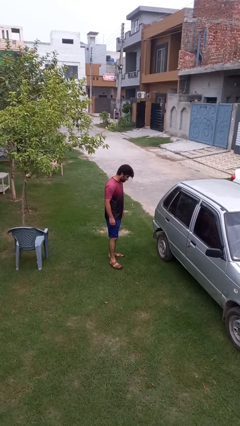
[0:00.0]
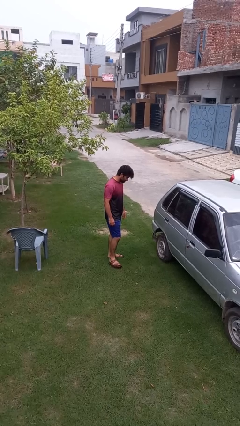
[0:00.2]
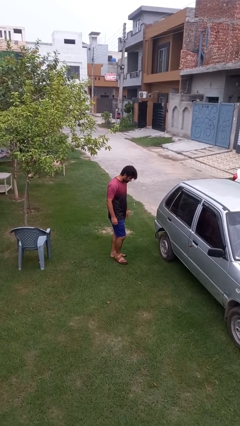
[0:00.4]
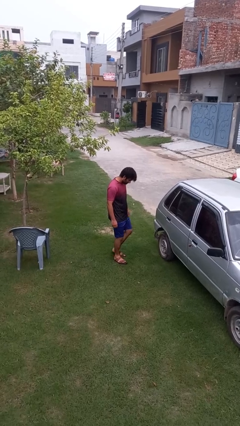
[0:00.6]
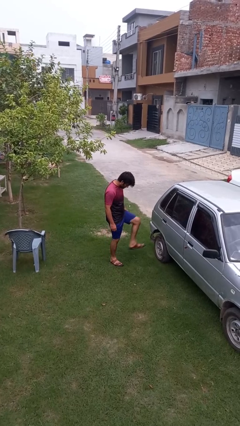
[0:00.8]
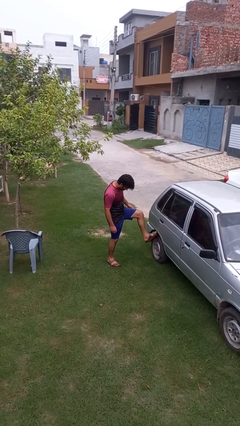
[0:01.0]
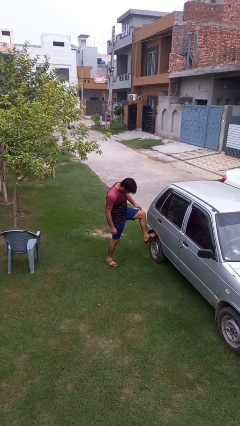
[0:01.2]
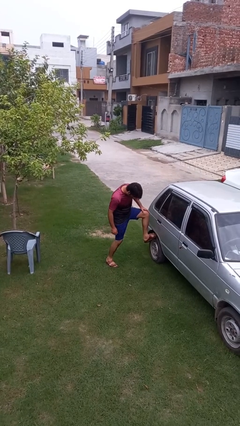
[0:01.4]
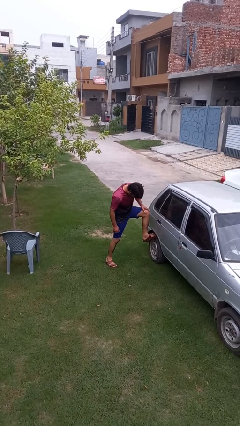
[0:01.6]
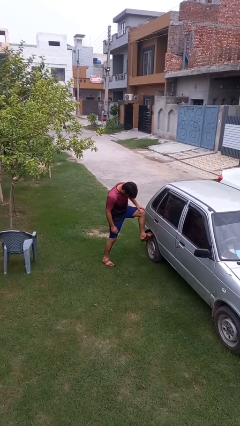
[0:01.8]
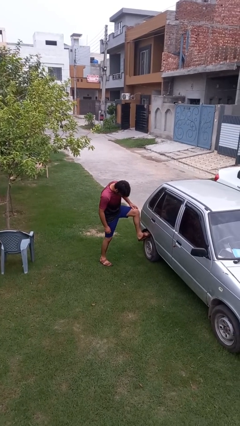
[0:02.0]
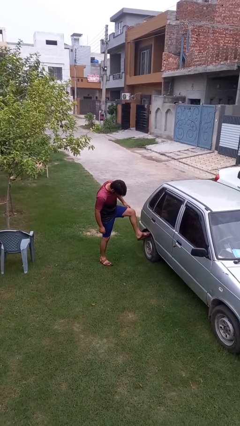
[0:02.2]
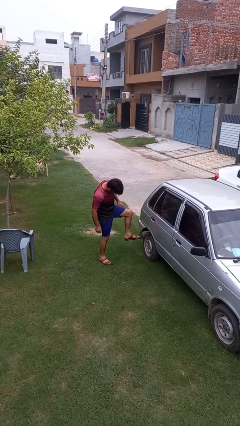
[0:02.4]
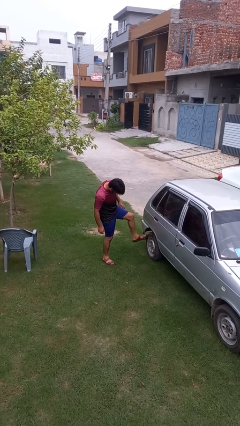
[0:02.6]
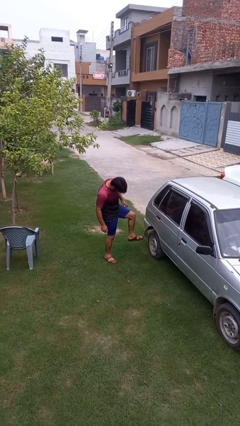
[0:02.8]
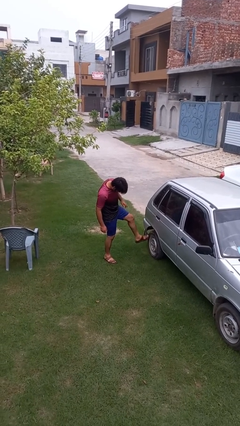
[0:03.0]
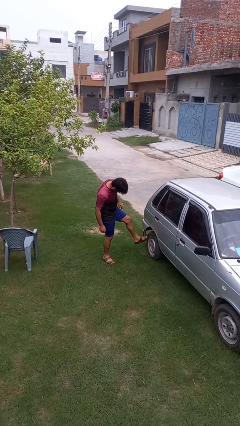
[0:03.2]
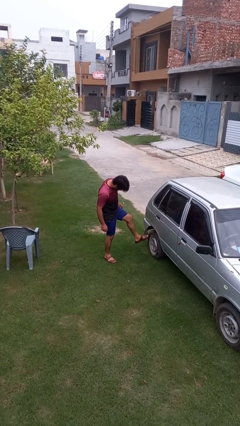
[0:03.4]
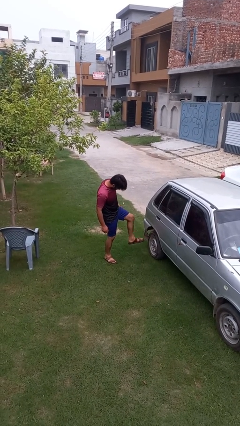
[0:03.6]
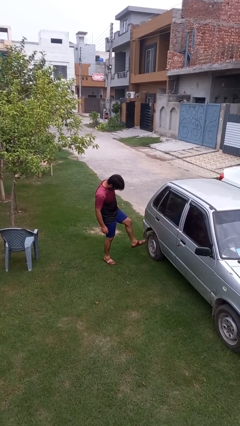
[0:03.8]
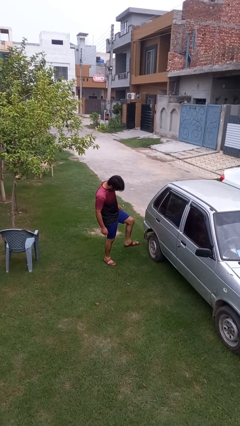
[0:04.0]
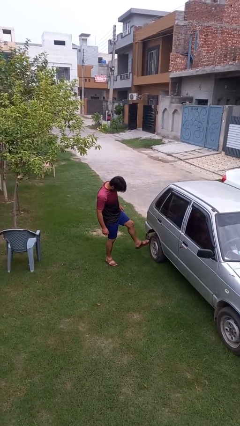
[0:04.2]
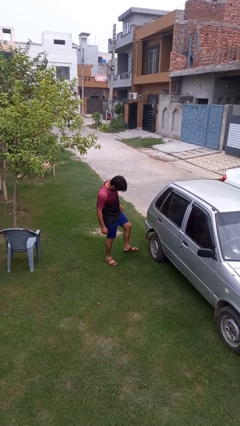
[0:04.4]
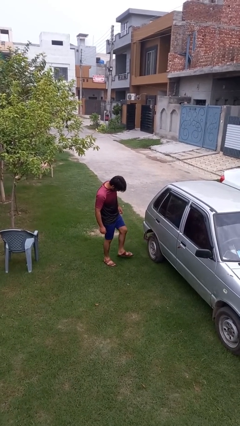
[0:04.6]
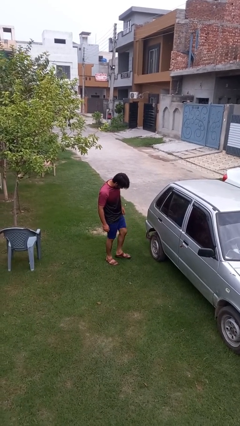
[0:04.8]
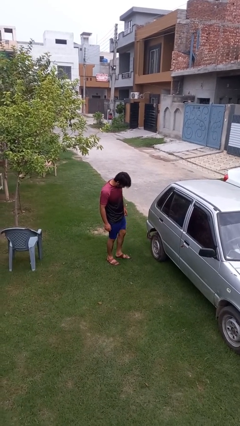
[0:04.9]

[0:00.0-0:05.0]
person kicks car tires

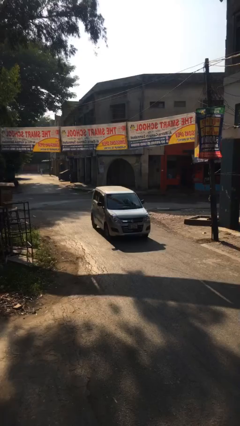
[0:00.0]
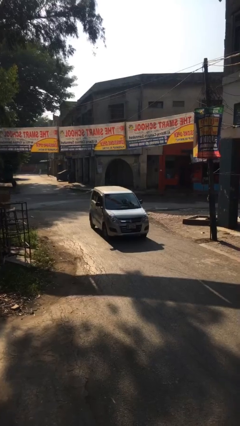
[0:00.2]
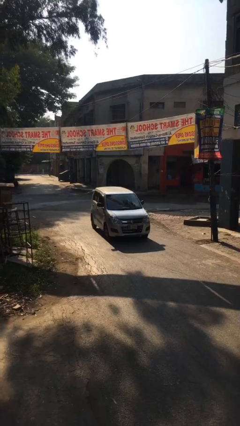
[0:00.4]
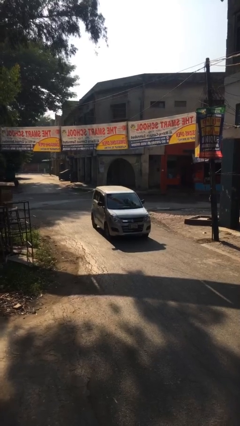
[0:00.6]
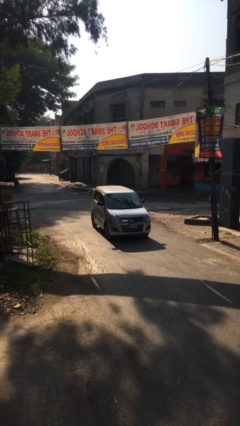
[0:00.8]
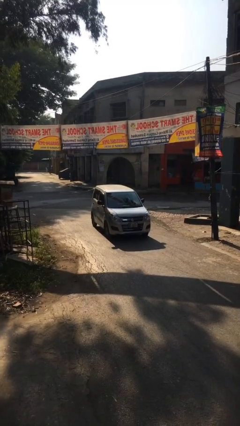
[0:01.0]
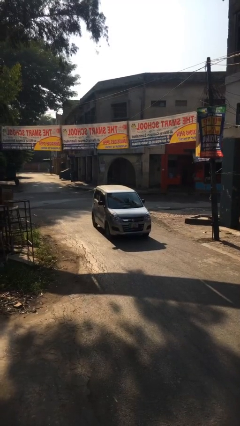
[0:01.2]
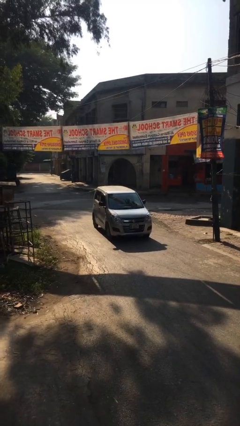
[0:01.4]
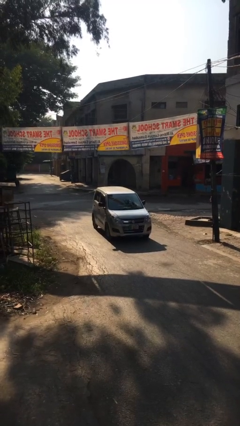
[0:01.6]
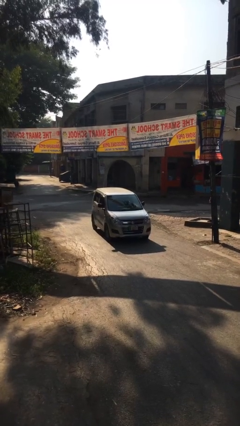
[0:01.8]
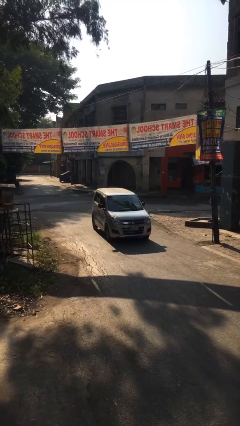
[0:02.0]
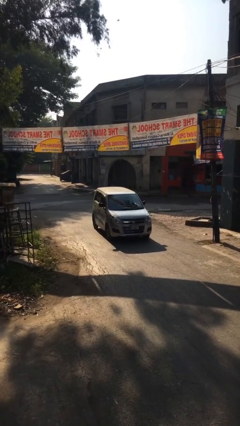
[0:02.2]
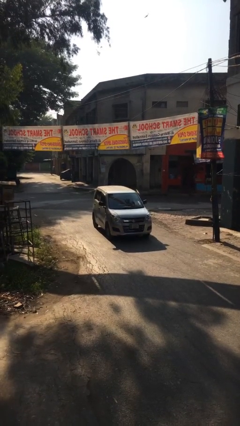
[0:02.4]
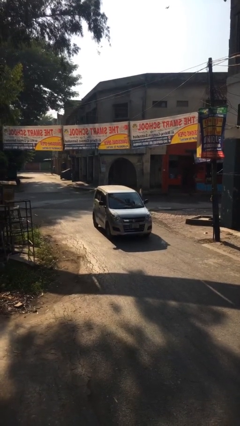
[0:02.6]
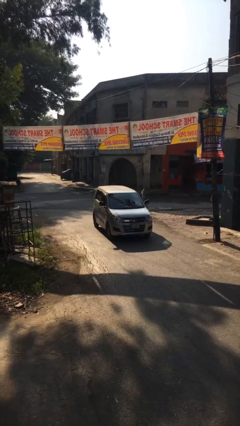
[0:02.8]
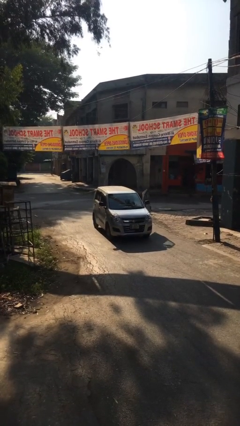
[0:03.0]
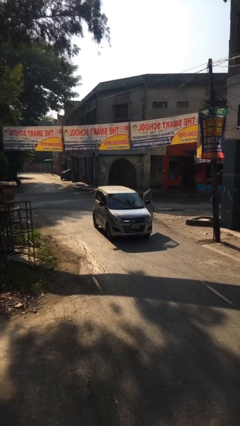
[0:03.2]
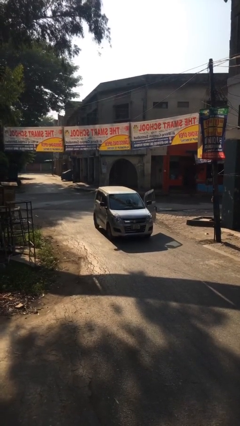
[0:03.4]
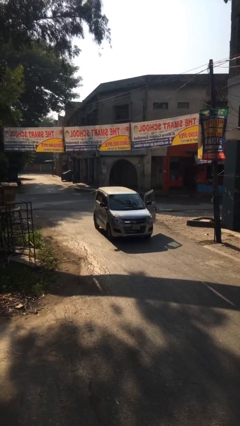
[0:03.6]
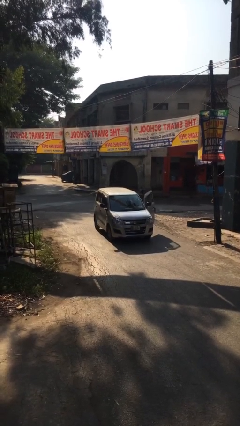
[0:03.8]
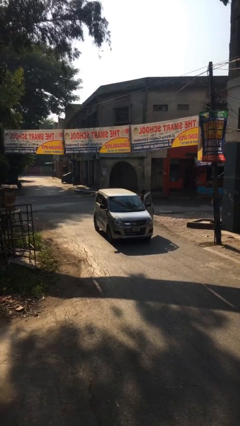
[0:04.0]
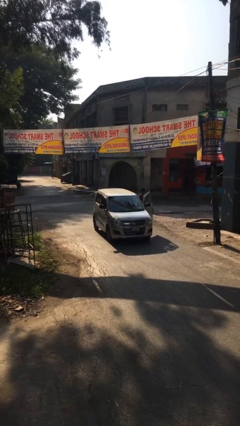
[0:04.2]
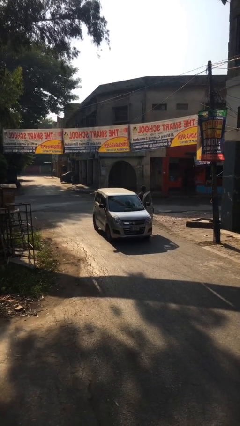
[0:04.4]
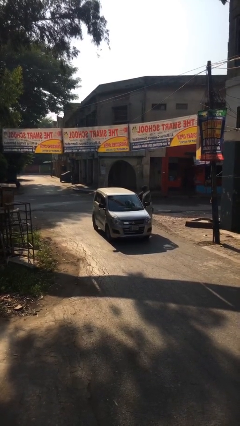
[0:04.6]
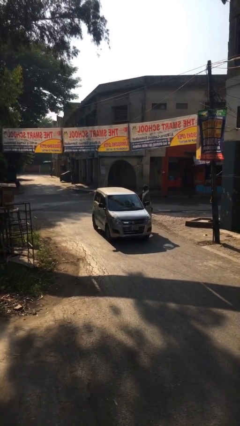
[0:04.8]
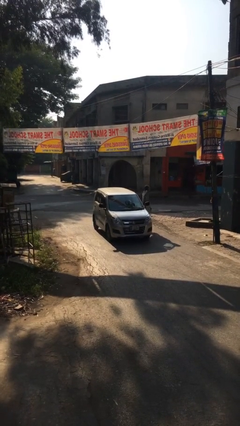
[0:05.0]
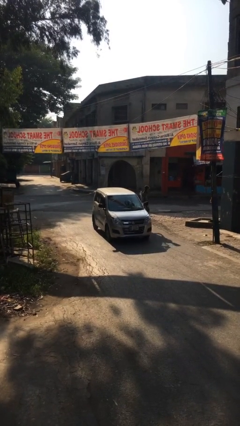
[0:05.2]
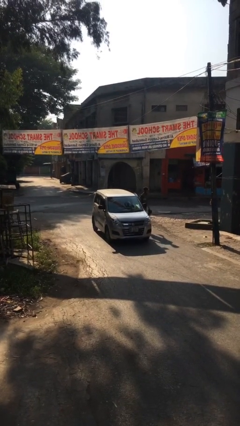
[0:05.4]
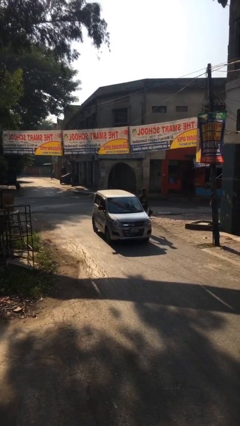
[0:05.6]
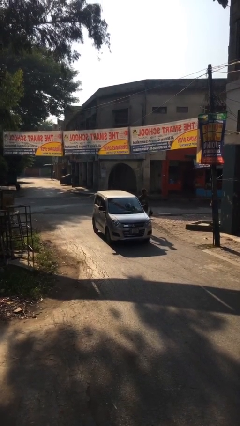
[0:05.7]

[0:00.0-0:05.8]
car drops off person

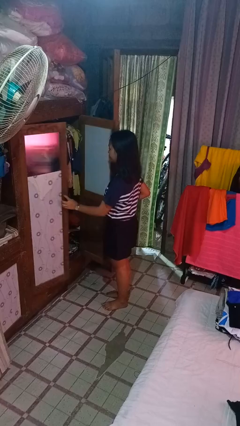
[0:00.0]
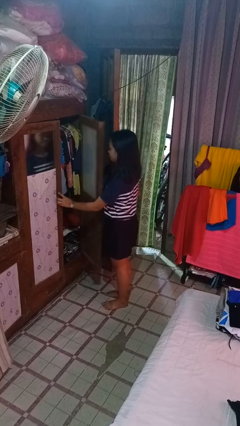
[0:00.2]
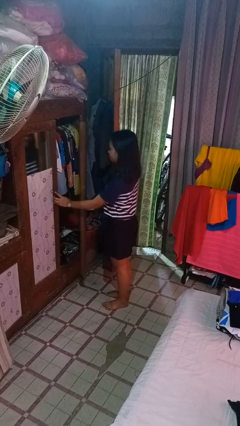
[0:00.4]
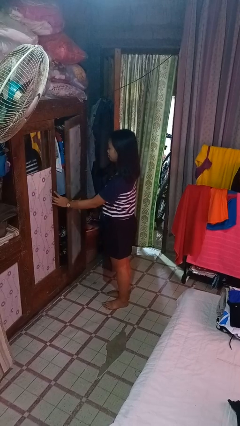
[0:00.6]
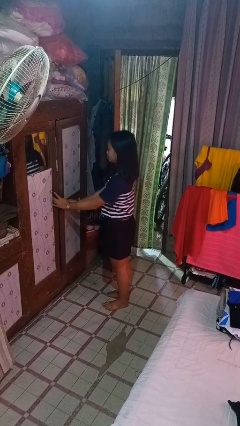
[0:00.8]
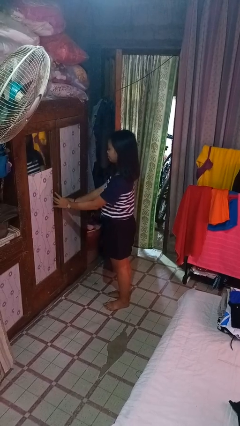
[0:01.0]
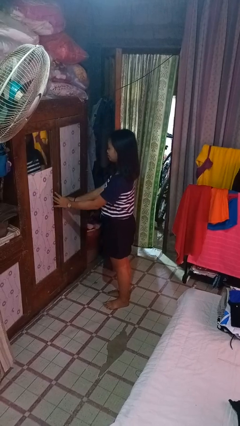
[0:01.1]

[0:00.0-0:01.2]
person closes closet door

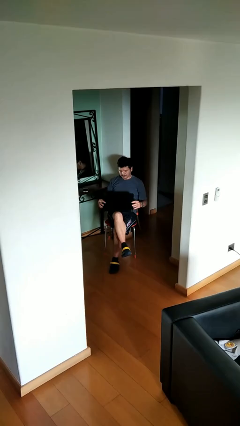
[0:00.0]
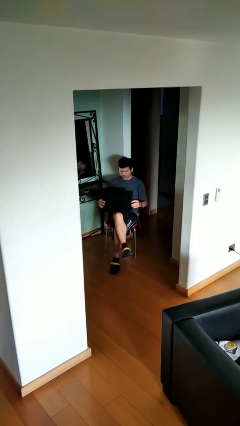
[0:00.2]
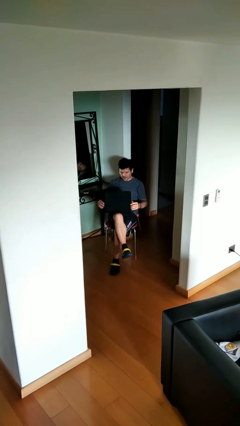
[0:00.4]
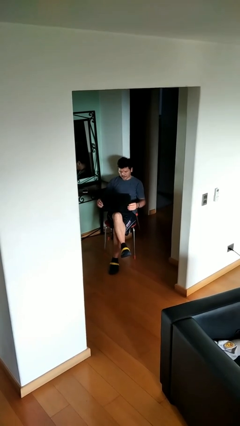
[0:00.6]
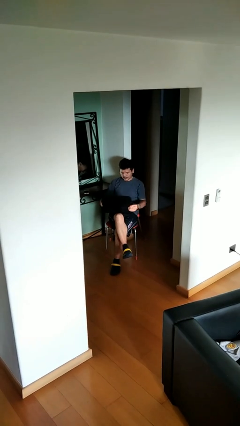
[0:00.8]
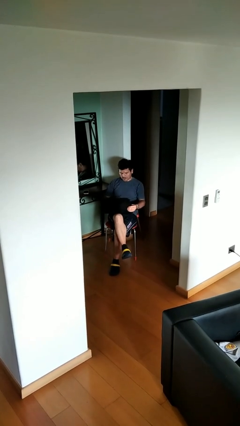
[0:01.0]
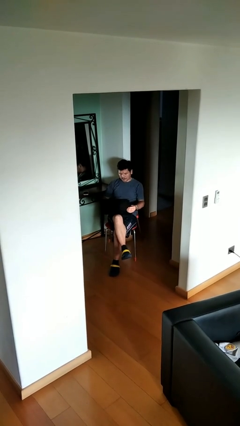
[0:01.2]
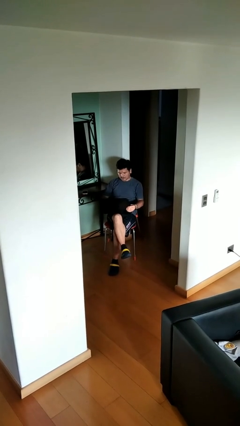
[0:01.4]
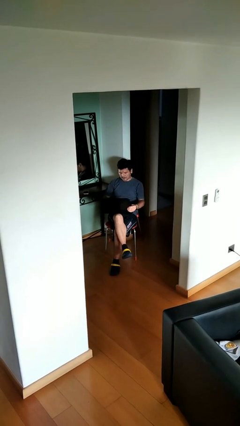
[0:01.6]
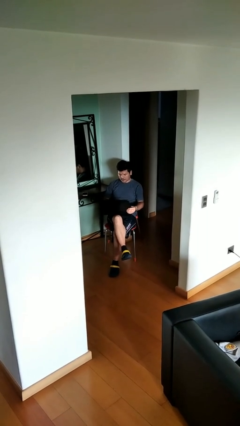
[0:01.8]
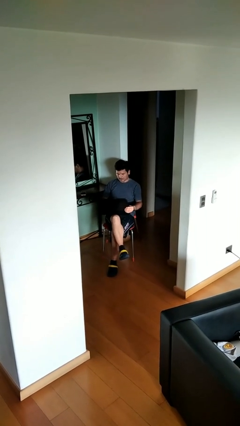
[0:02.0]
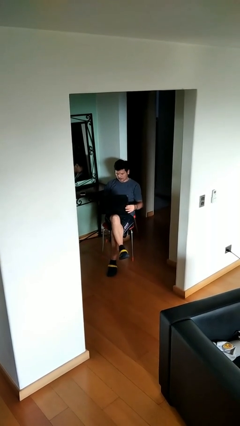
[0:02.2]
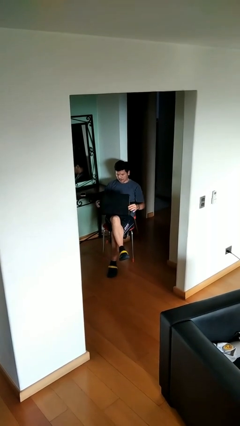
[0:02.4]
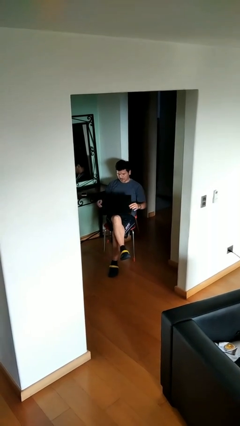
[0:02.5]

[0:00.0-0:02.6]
person interacts with laptop

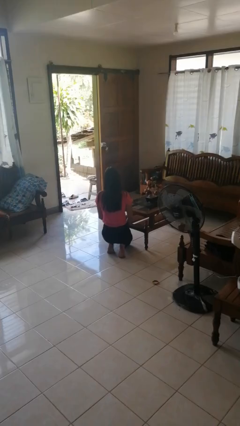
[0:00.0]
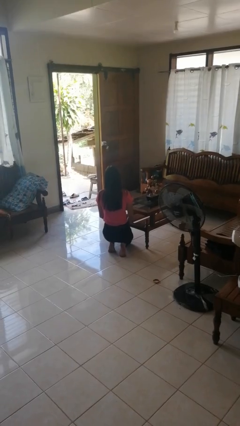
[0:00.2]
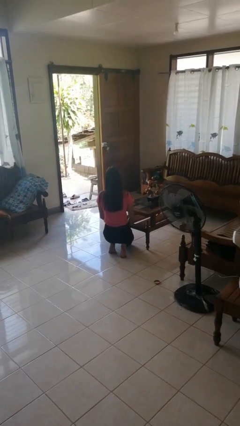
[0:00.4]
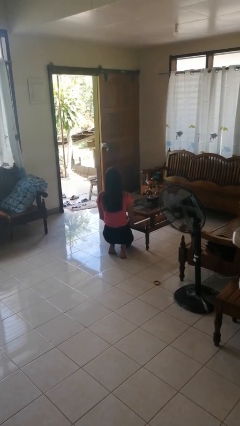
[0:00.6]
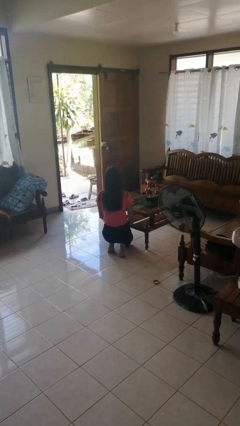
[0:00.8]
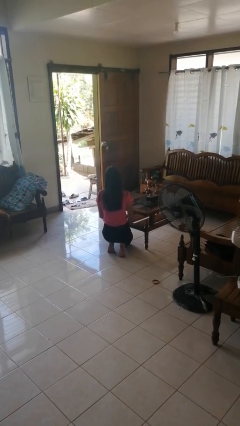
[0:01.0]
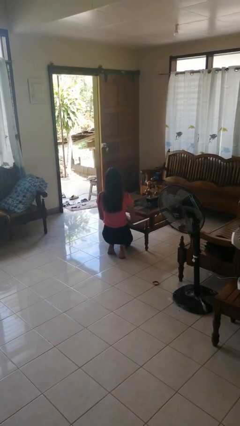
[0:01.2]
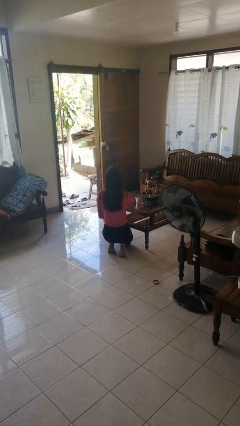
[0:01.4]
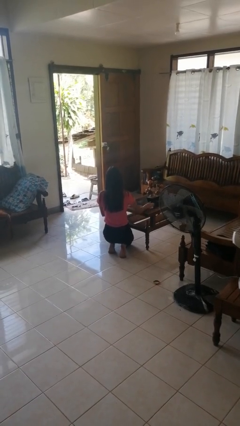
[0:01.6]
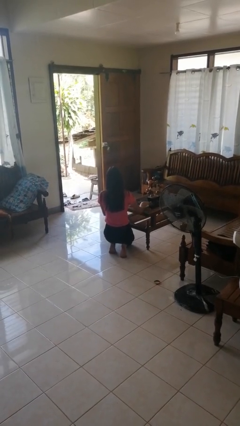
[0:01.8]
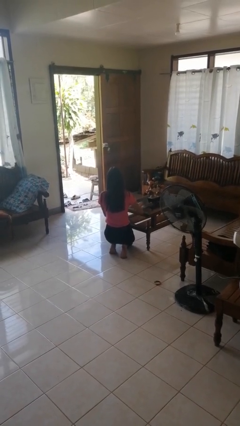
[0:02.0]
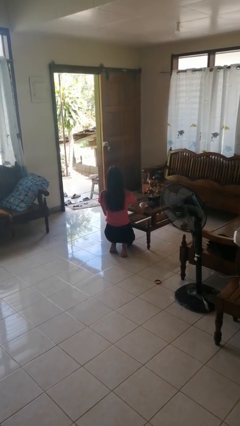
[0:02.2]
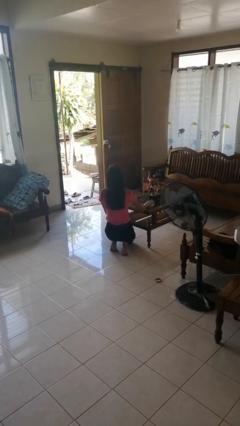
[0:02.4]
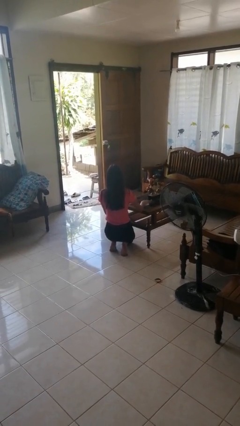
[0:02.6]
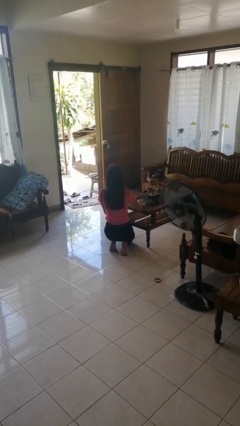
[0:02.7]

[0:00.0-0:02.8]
person cleans table with rag
